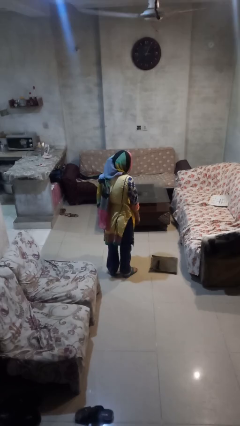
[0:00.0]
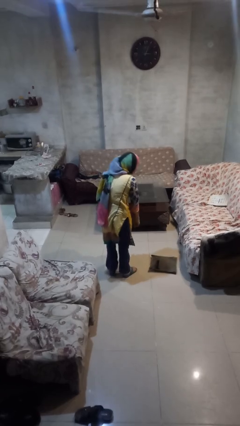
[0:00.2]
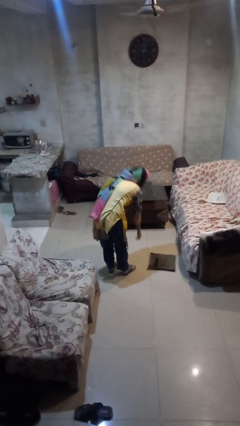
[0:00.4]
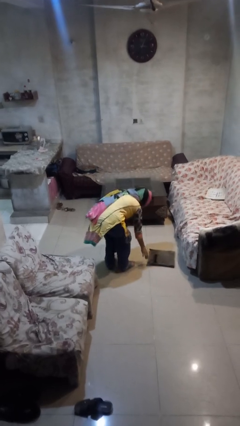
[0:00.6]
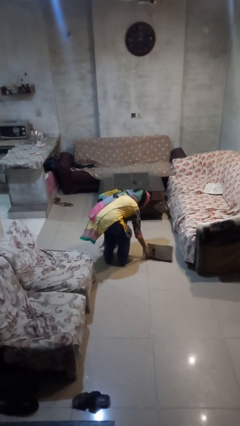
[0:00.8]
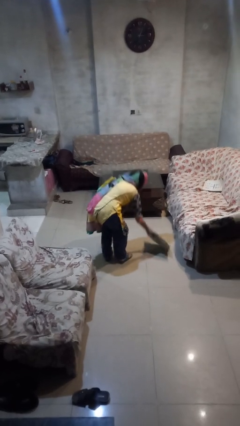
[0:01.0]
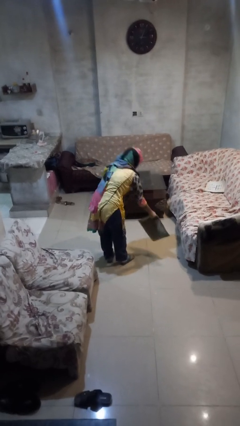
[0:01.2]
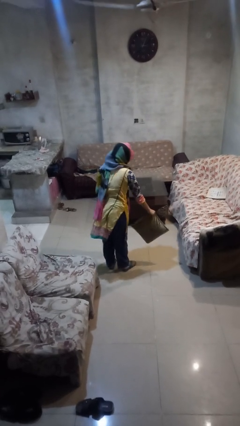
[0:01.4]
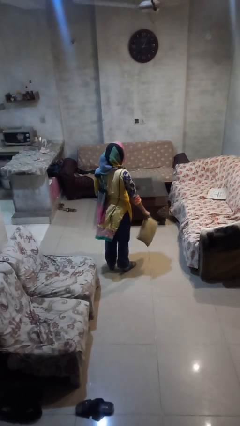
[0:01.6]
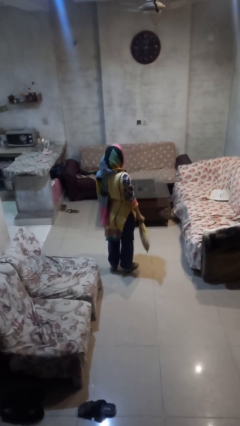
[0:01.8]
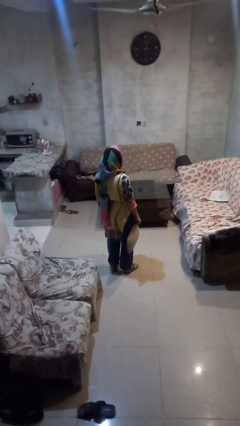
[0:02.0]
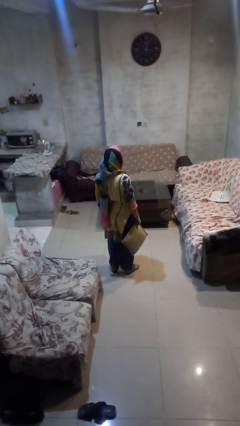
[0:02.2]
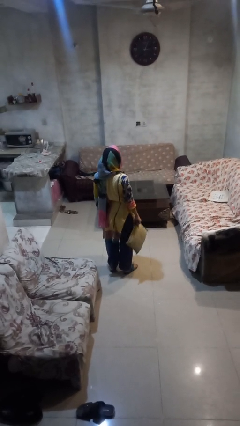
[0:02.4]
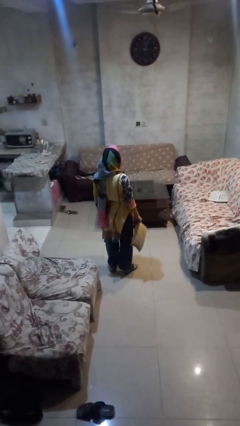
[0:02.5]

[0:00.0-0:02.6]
person picks up object from floor

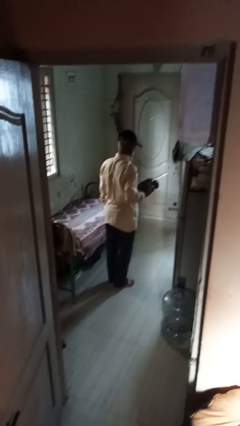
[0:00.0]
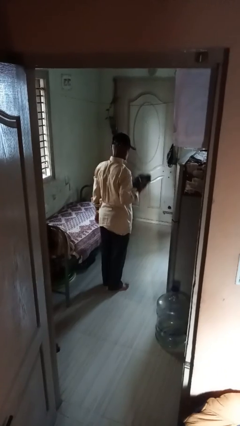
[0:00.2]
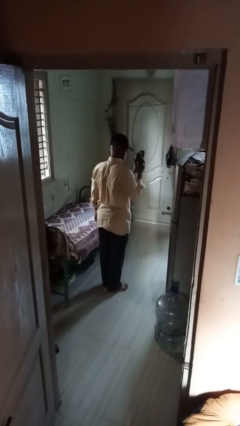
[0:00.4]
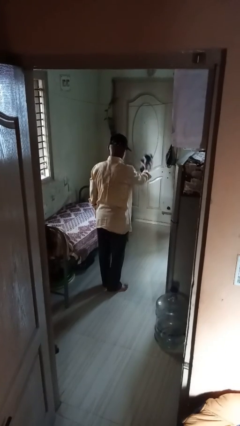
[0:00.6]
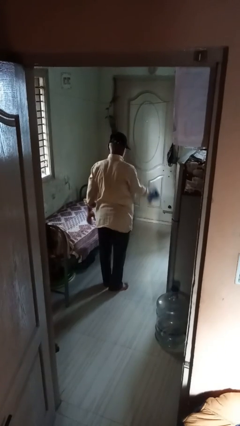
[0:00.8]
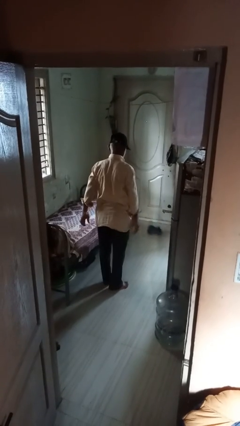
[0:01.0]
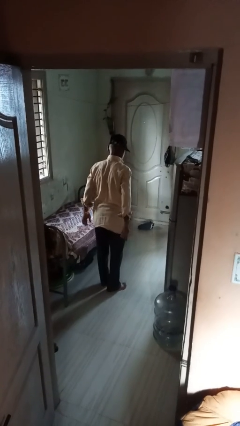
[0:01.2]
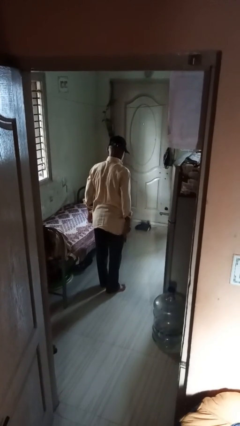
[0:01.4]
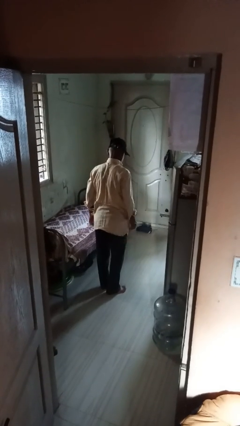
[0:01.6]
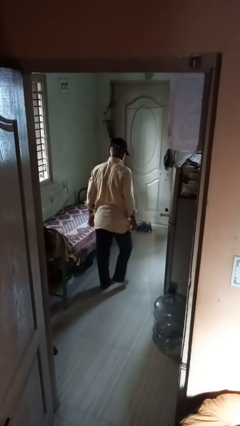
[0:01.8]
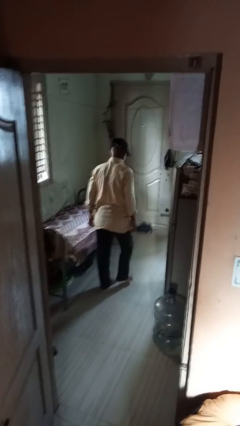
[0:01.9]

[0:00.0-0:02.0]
person throws object to ground

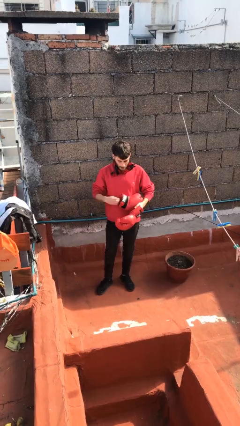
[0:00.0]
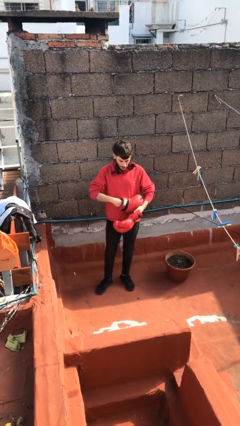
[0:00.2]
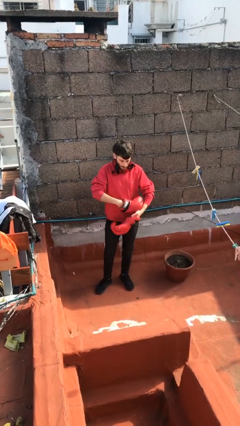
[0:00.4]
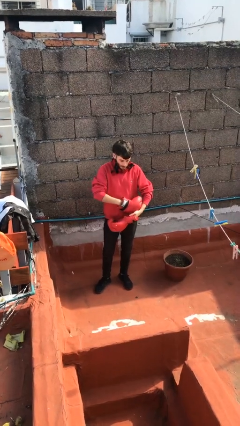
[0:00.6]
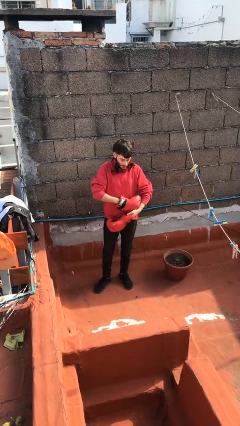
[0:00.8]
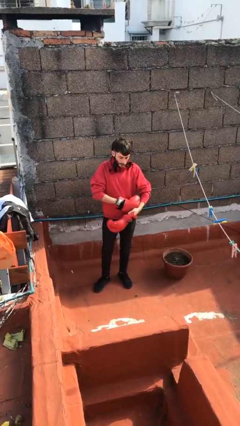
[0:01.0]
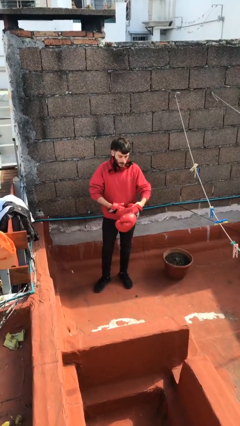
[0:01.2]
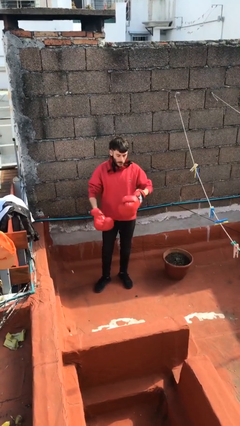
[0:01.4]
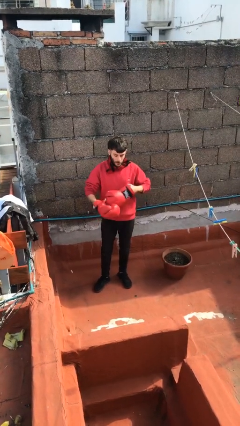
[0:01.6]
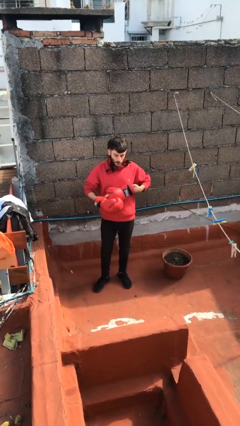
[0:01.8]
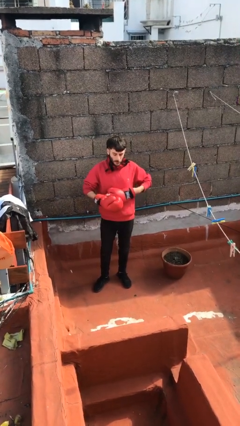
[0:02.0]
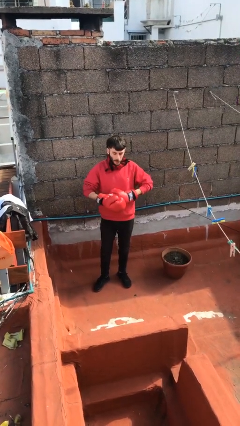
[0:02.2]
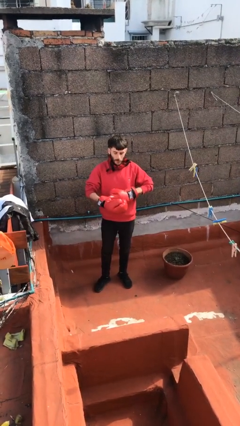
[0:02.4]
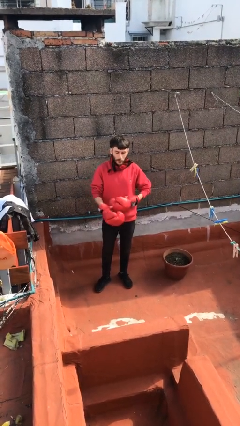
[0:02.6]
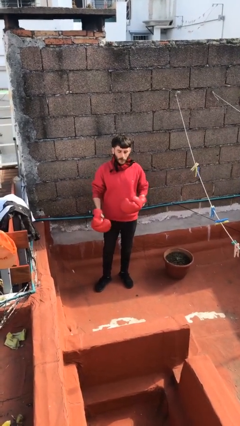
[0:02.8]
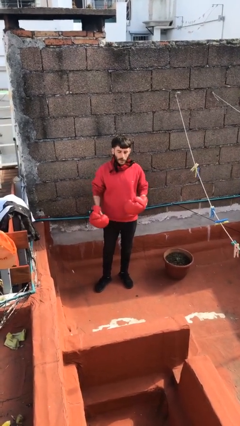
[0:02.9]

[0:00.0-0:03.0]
person puts on gloves

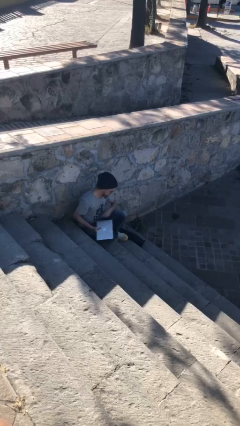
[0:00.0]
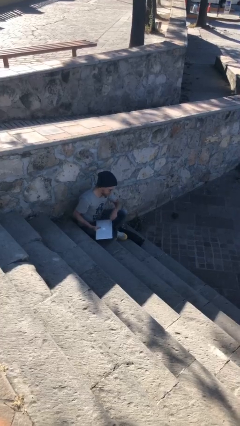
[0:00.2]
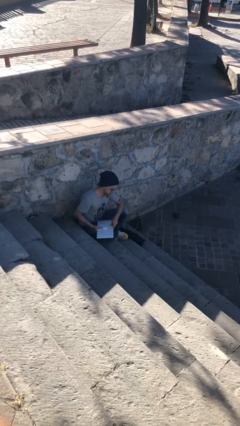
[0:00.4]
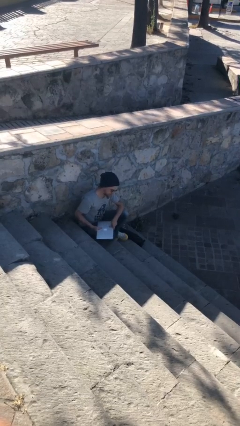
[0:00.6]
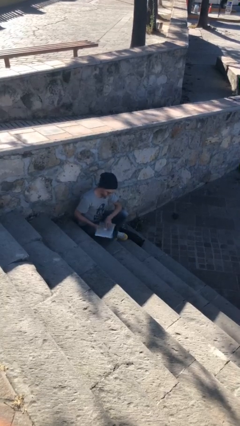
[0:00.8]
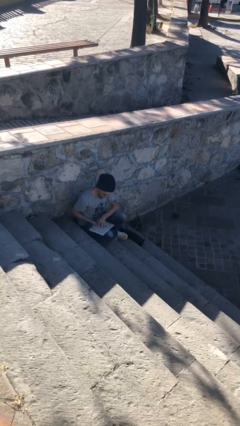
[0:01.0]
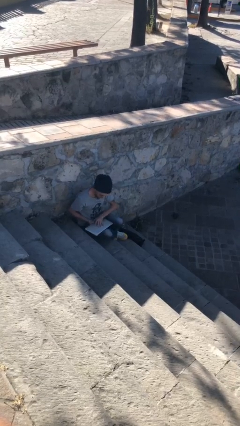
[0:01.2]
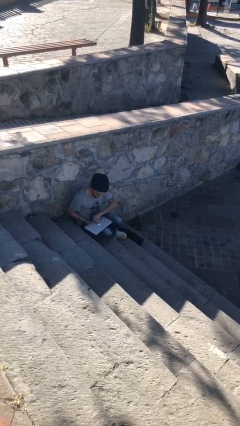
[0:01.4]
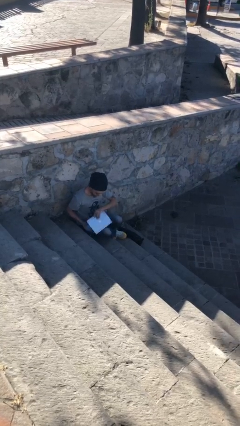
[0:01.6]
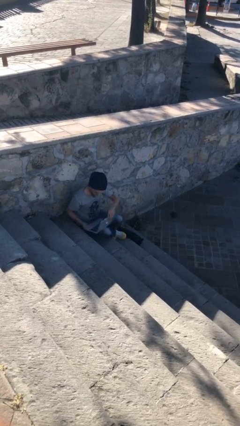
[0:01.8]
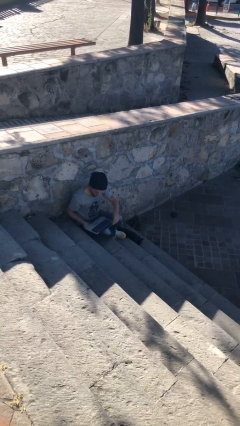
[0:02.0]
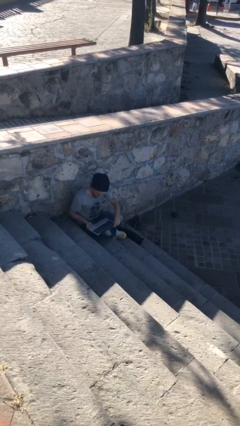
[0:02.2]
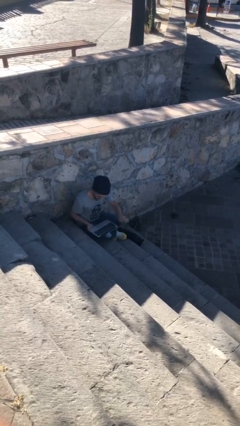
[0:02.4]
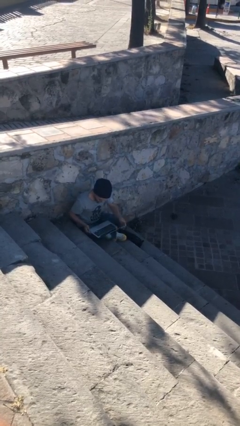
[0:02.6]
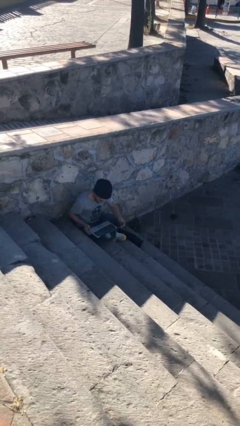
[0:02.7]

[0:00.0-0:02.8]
person interacts with laptop

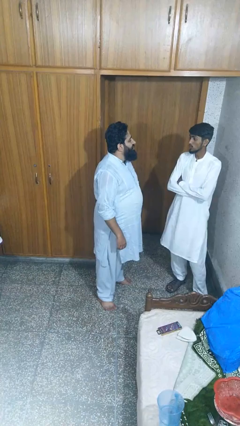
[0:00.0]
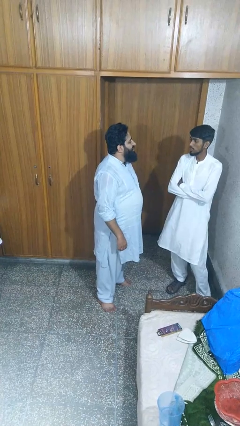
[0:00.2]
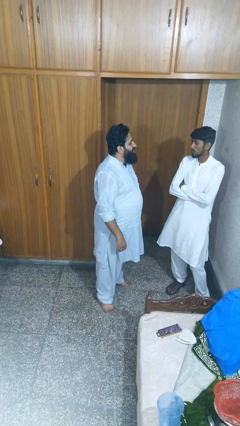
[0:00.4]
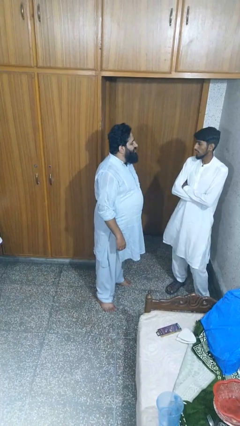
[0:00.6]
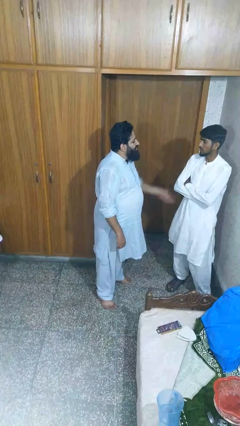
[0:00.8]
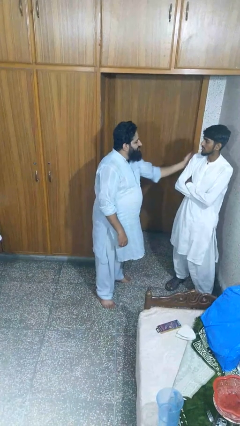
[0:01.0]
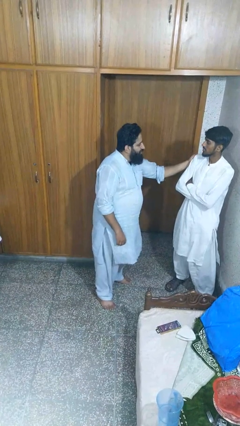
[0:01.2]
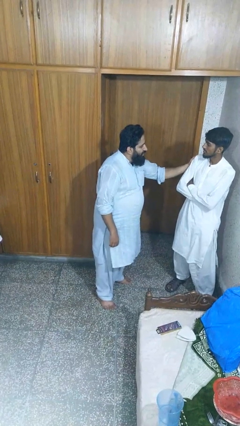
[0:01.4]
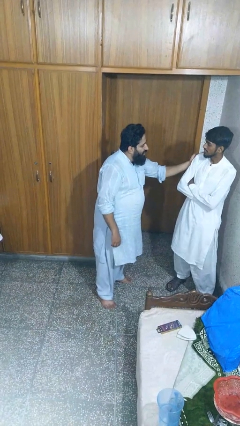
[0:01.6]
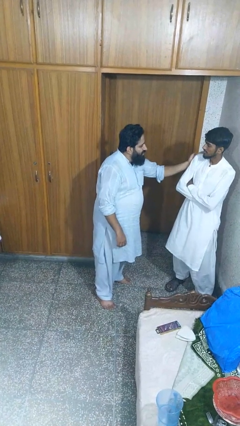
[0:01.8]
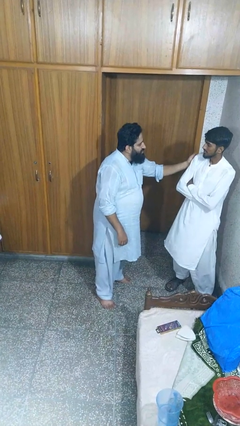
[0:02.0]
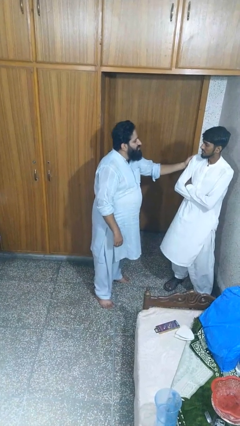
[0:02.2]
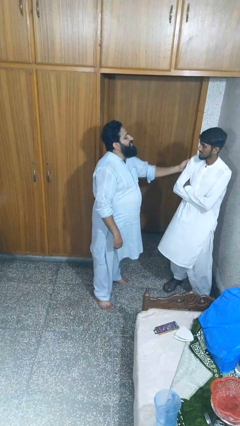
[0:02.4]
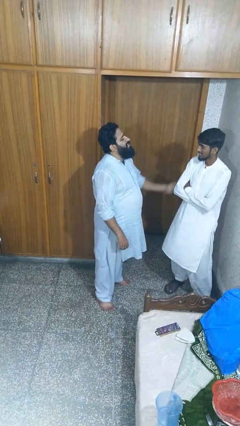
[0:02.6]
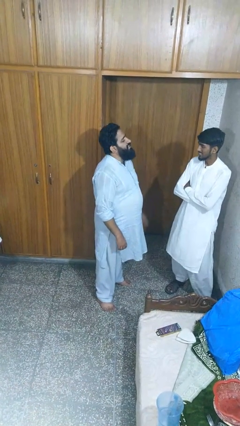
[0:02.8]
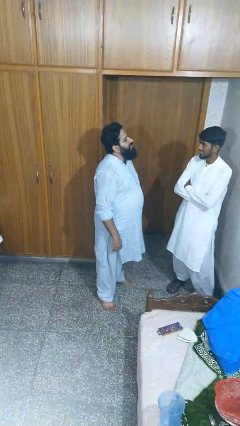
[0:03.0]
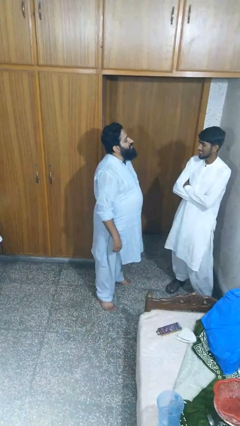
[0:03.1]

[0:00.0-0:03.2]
person pounds shoulders of person

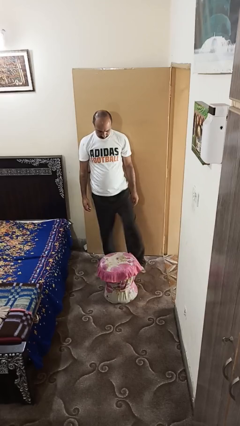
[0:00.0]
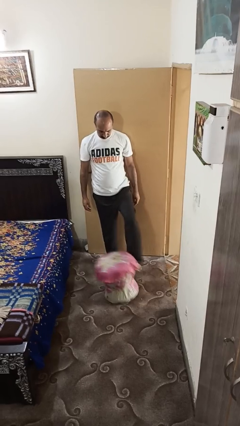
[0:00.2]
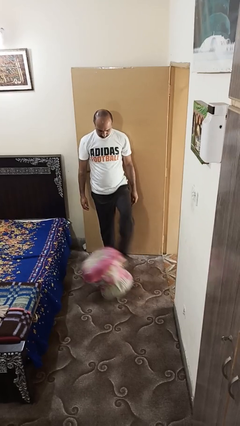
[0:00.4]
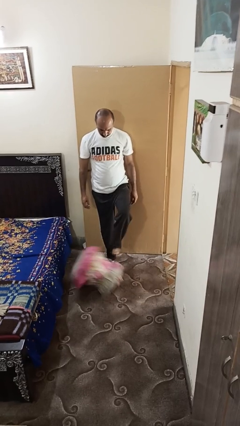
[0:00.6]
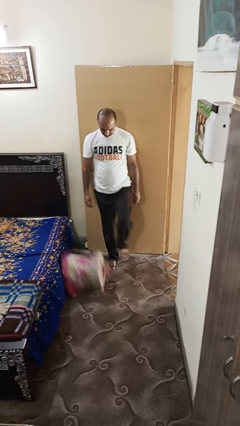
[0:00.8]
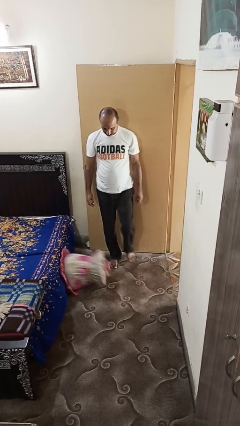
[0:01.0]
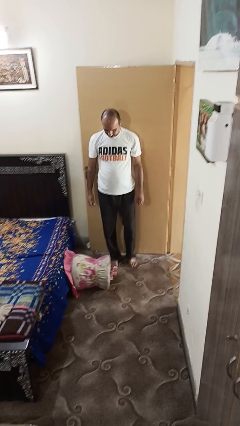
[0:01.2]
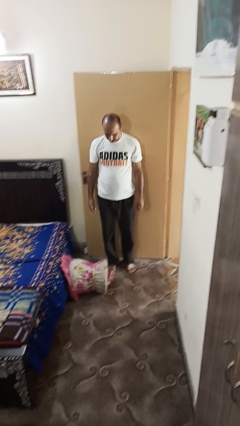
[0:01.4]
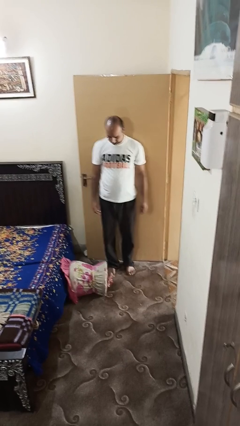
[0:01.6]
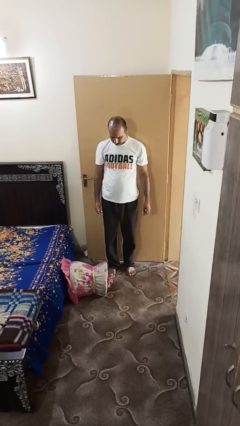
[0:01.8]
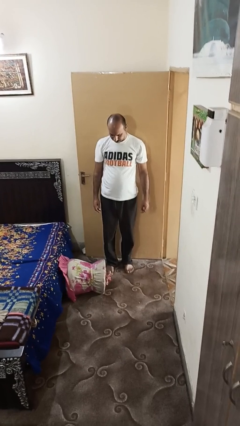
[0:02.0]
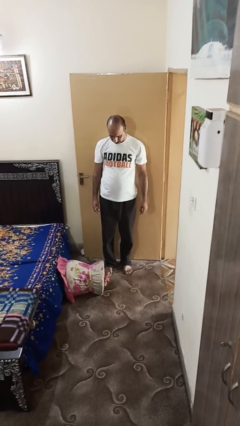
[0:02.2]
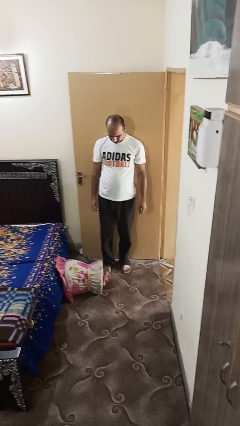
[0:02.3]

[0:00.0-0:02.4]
person knocks over furniture

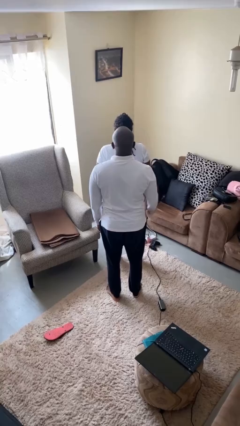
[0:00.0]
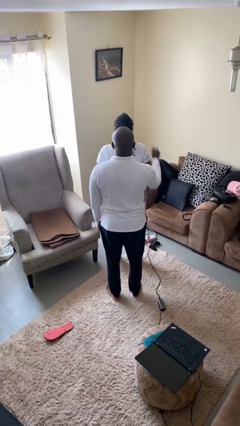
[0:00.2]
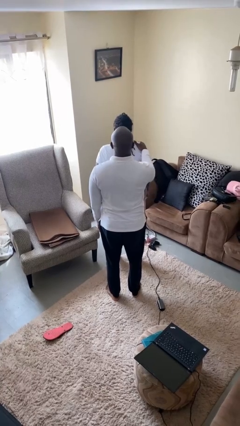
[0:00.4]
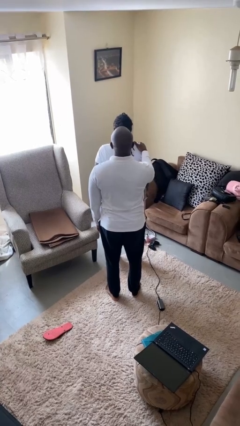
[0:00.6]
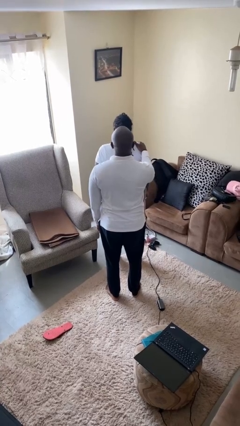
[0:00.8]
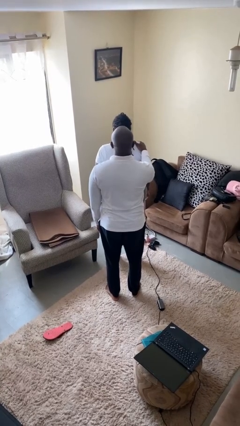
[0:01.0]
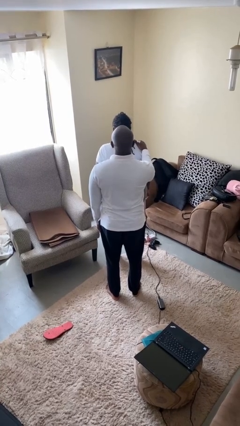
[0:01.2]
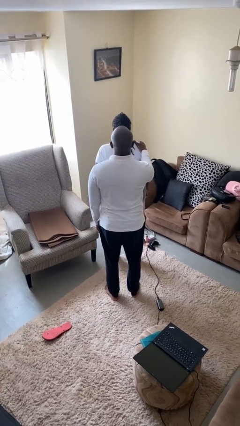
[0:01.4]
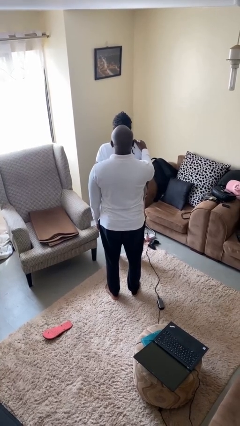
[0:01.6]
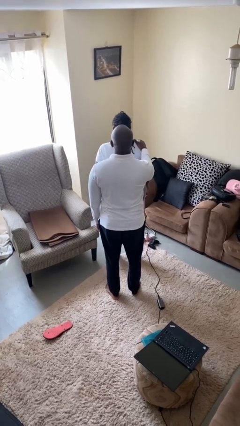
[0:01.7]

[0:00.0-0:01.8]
person grabs person by shoulder
